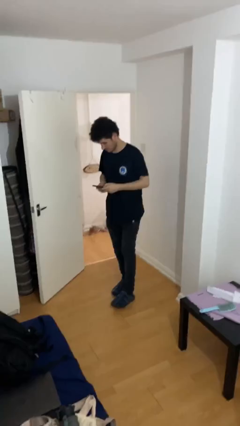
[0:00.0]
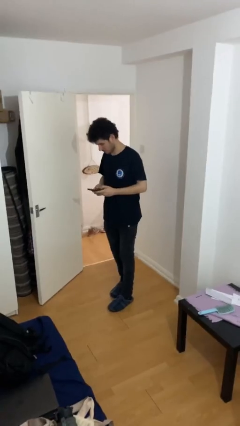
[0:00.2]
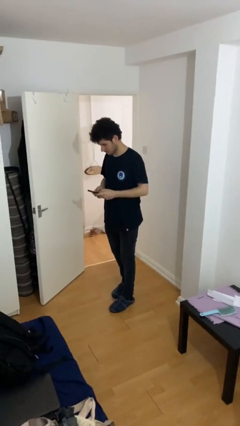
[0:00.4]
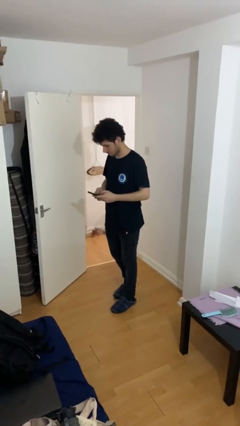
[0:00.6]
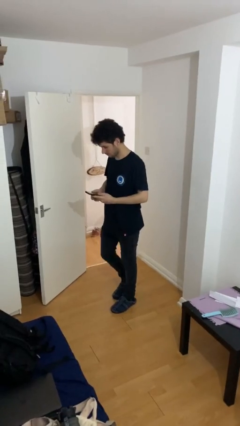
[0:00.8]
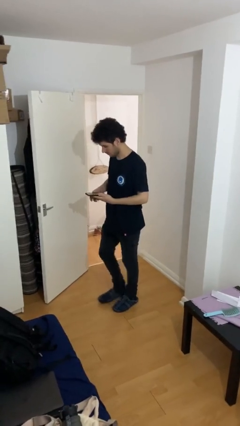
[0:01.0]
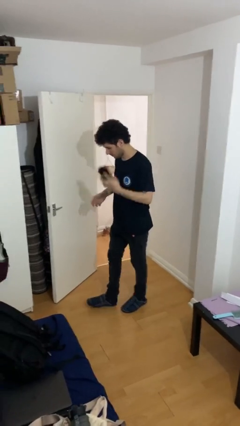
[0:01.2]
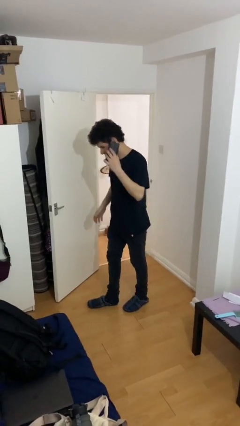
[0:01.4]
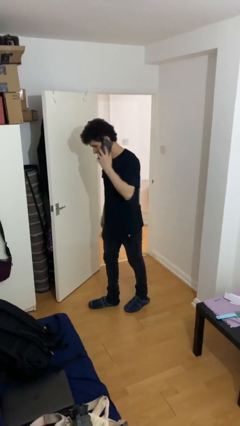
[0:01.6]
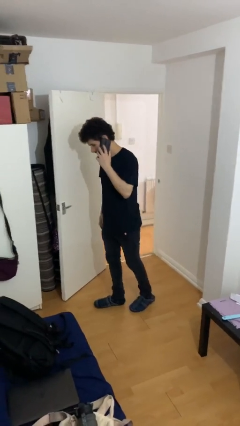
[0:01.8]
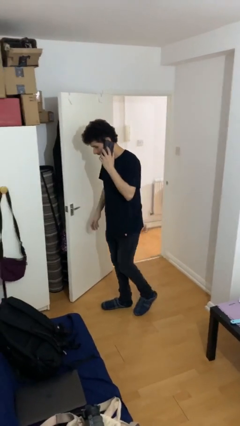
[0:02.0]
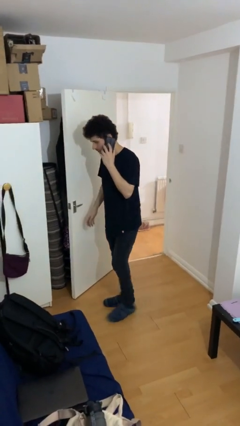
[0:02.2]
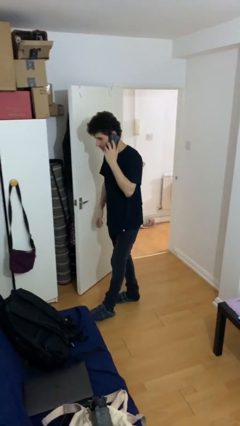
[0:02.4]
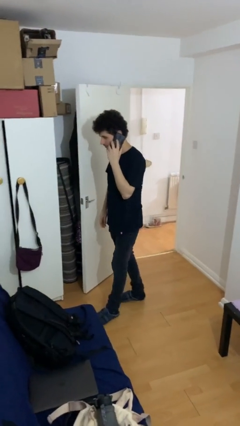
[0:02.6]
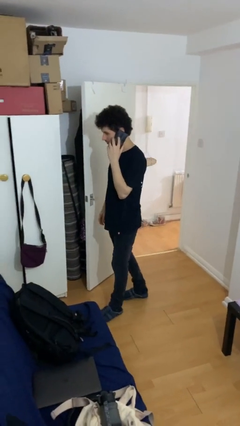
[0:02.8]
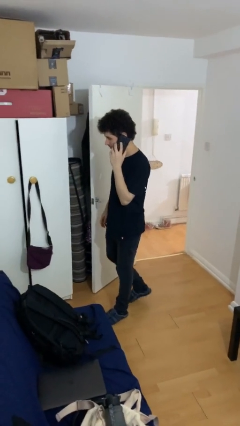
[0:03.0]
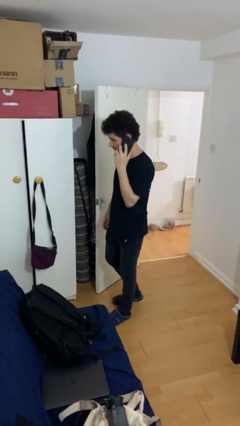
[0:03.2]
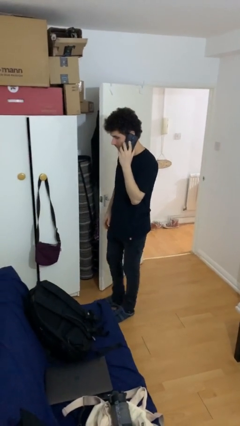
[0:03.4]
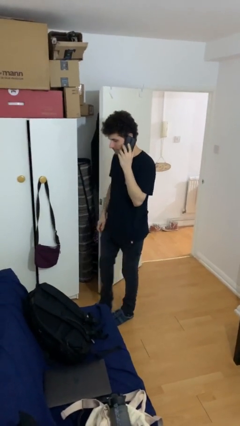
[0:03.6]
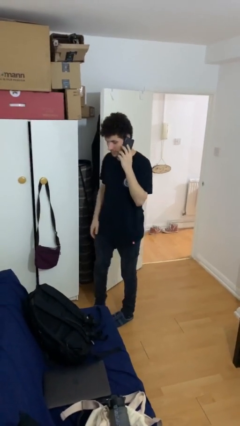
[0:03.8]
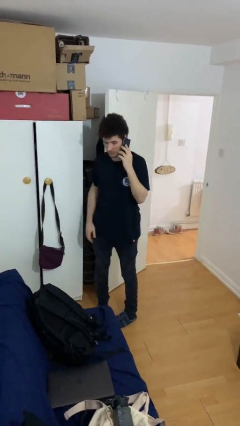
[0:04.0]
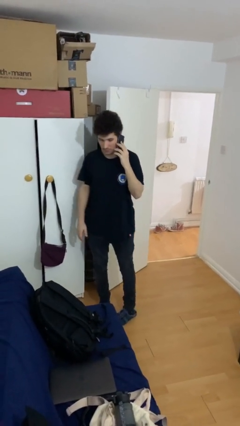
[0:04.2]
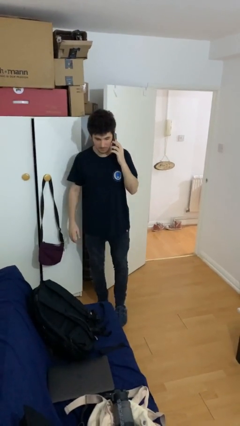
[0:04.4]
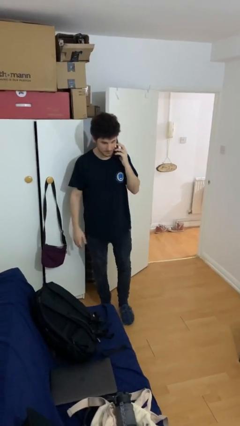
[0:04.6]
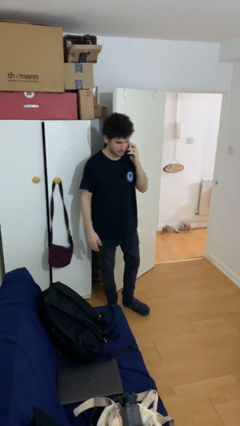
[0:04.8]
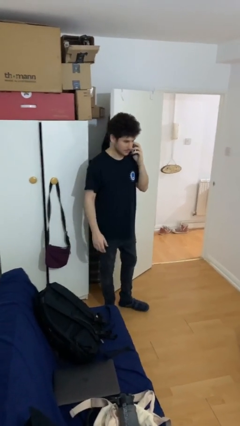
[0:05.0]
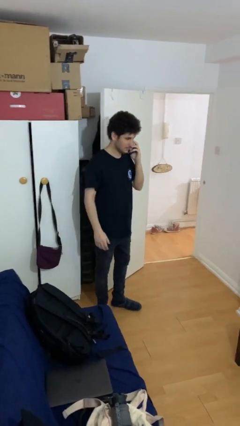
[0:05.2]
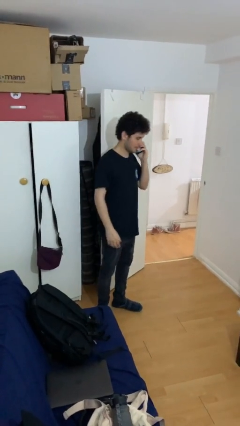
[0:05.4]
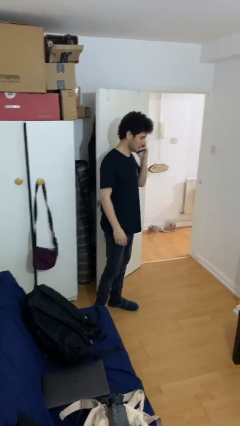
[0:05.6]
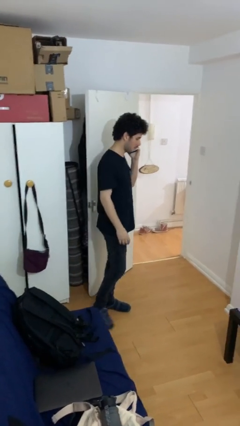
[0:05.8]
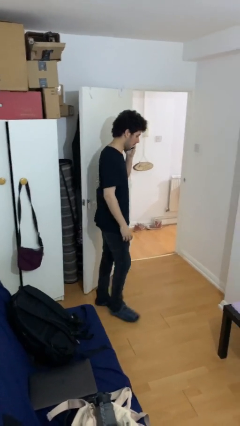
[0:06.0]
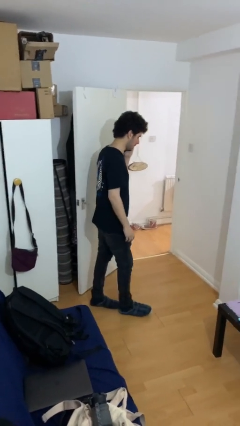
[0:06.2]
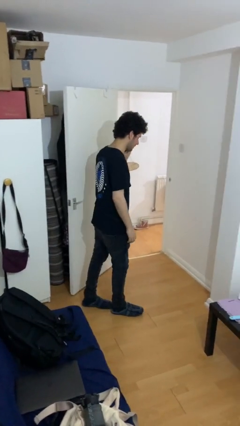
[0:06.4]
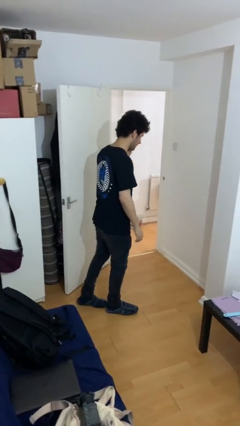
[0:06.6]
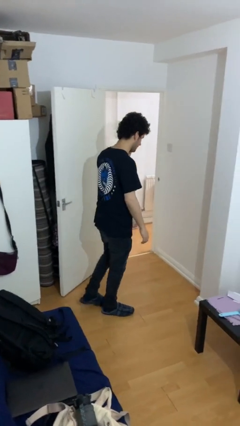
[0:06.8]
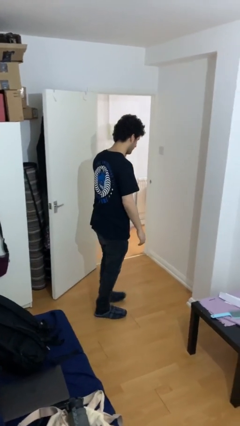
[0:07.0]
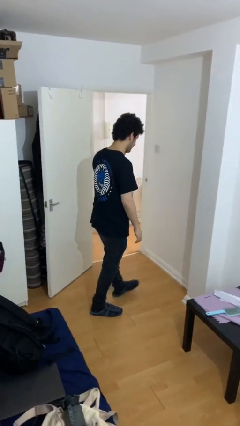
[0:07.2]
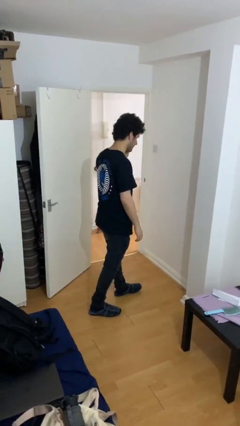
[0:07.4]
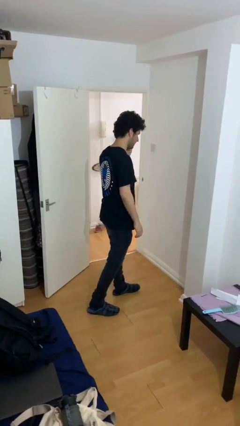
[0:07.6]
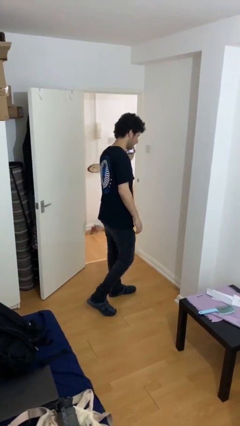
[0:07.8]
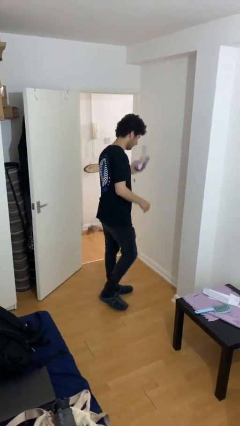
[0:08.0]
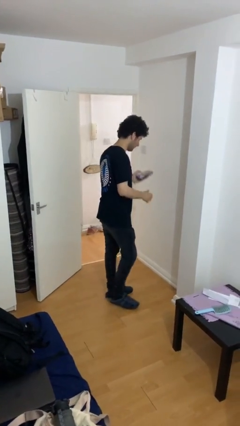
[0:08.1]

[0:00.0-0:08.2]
person talks on phone

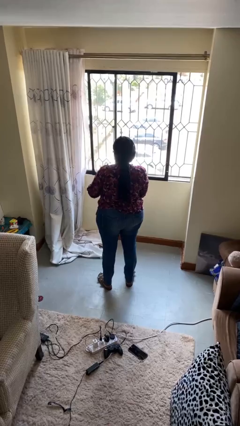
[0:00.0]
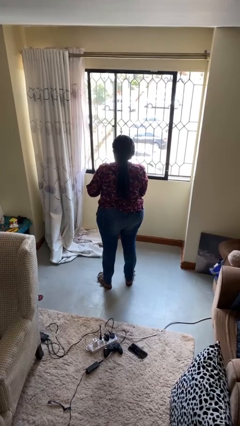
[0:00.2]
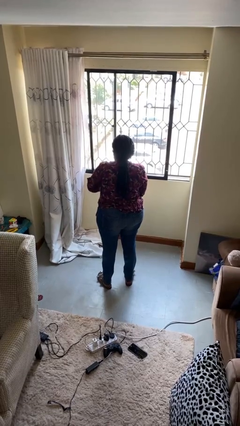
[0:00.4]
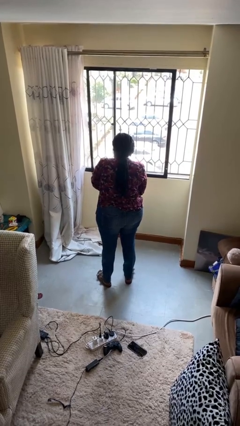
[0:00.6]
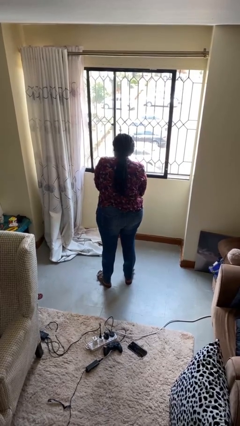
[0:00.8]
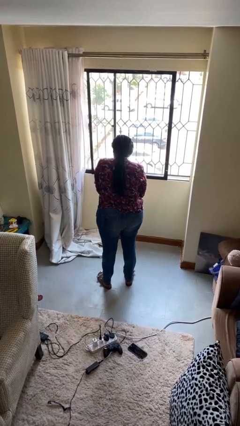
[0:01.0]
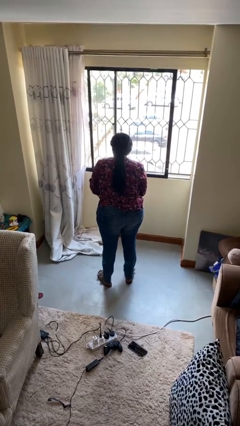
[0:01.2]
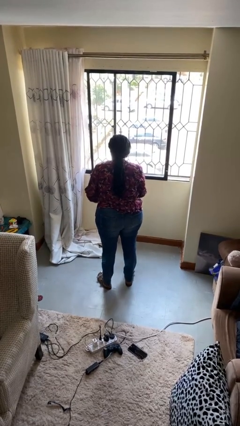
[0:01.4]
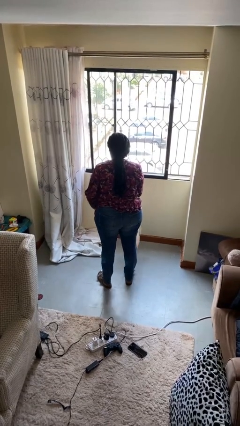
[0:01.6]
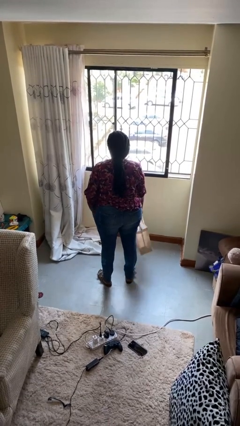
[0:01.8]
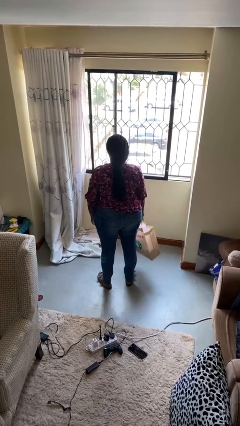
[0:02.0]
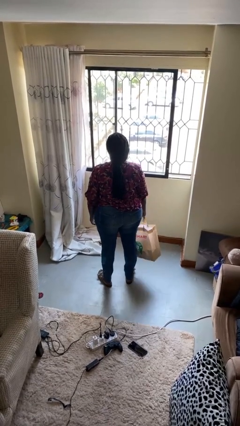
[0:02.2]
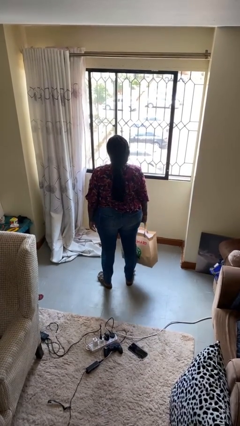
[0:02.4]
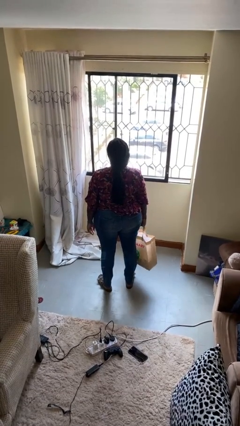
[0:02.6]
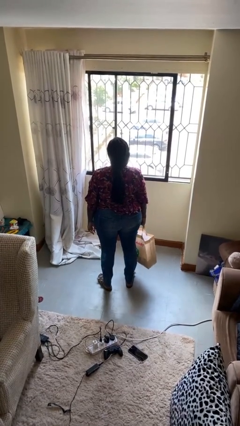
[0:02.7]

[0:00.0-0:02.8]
person puts object into bag

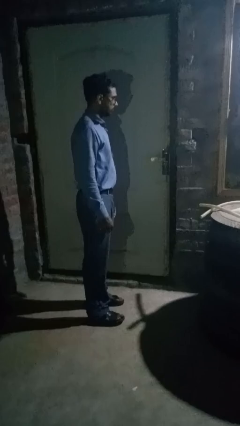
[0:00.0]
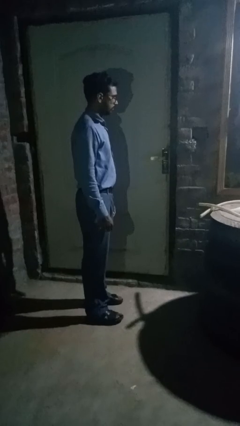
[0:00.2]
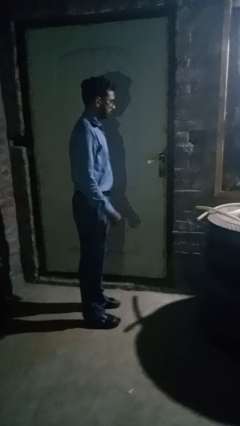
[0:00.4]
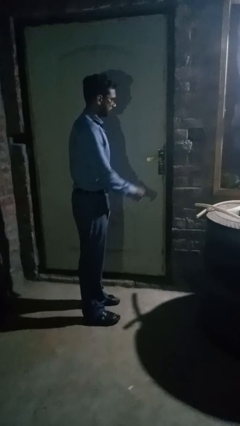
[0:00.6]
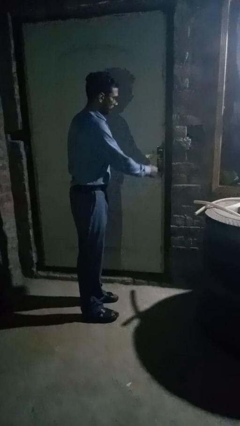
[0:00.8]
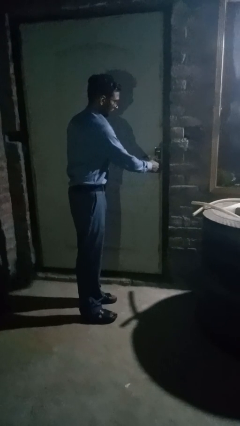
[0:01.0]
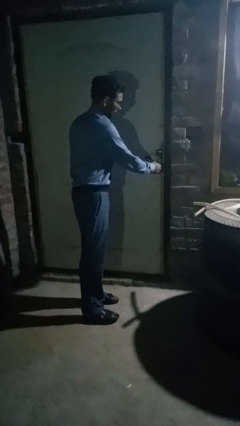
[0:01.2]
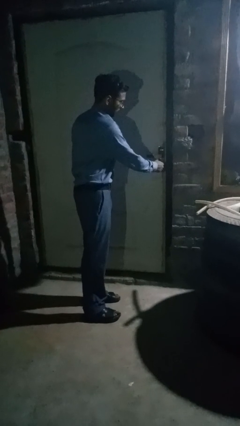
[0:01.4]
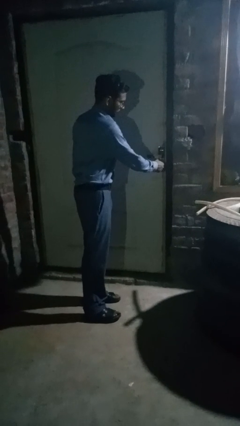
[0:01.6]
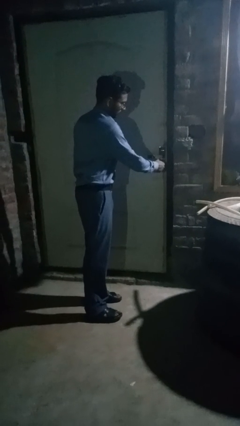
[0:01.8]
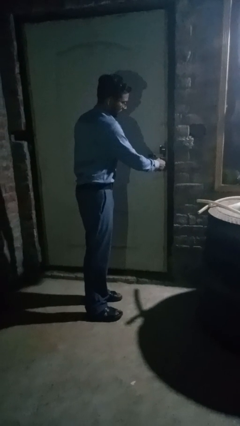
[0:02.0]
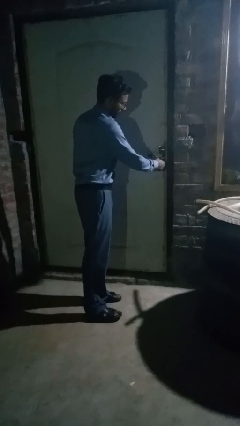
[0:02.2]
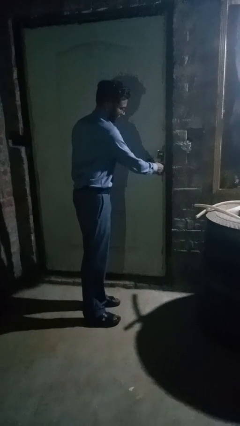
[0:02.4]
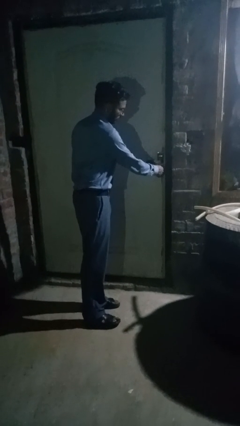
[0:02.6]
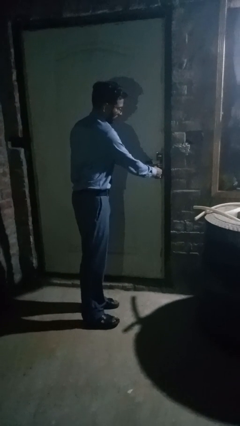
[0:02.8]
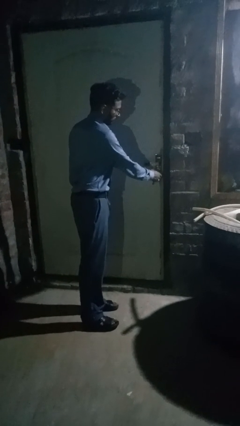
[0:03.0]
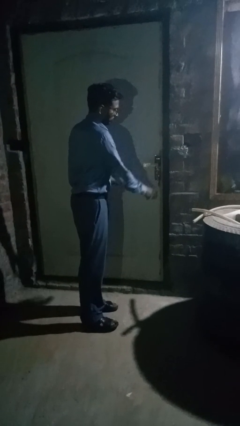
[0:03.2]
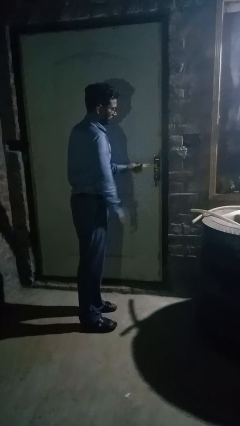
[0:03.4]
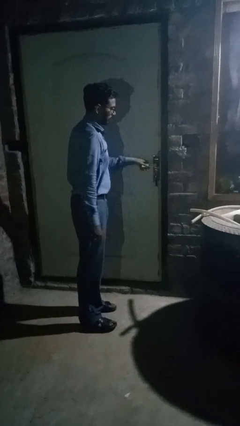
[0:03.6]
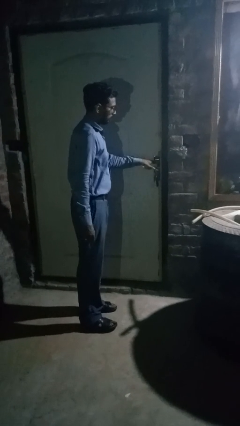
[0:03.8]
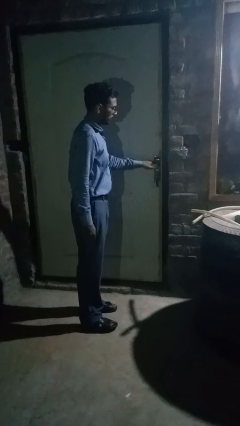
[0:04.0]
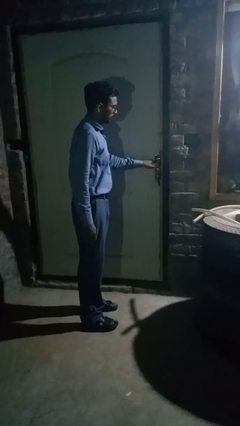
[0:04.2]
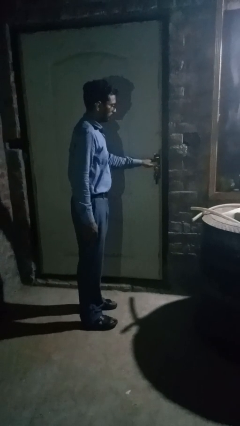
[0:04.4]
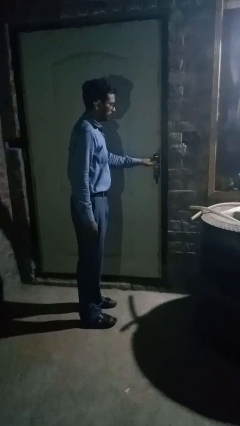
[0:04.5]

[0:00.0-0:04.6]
person unlocks door with keys

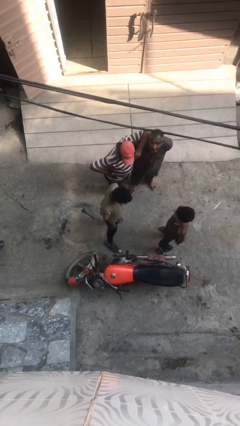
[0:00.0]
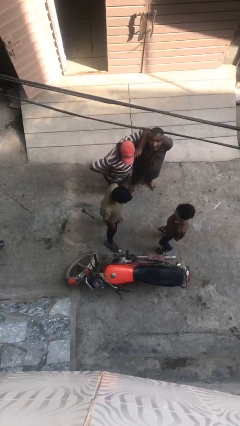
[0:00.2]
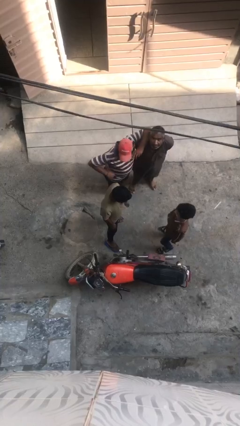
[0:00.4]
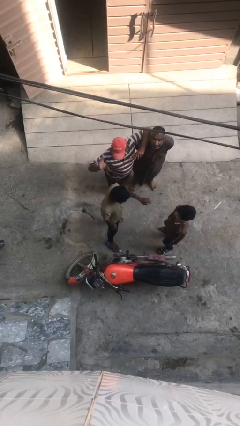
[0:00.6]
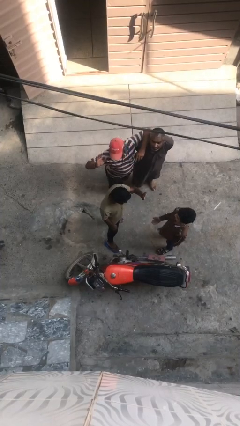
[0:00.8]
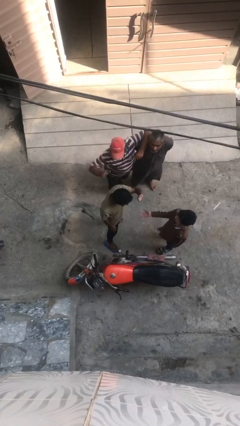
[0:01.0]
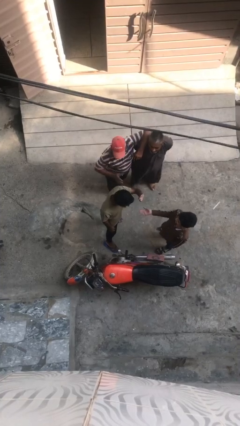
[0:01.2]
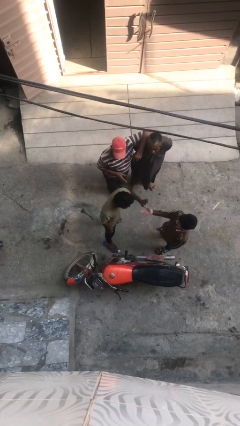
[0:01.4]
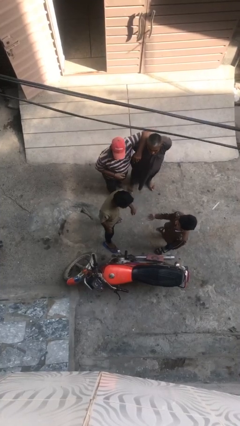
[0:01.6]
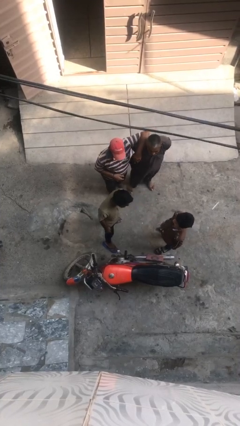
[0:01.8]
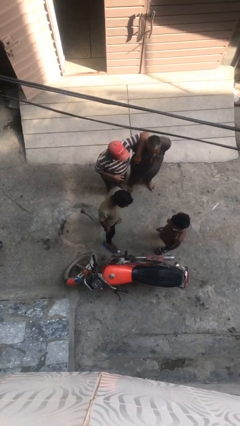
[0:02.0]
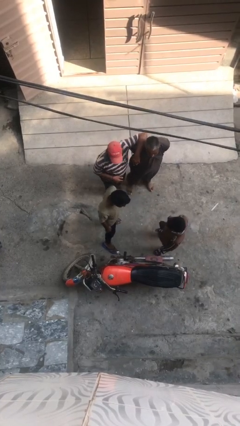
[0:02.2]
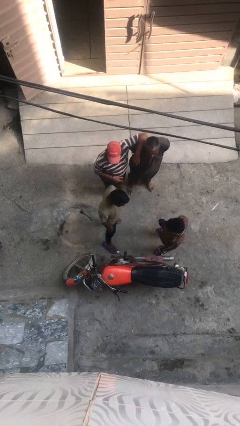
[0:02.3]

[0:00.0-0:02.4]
person laughs with person
